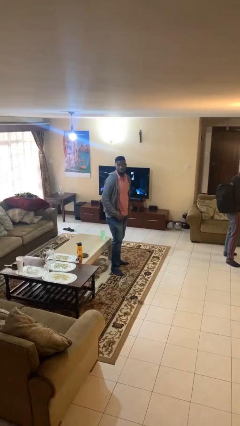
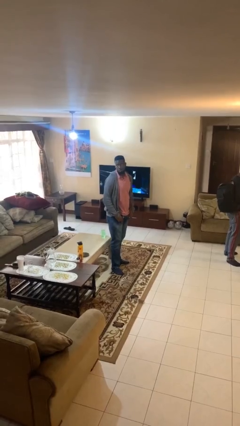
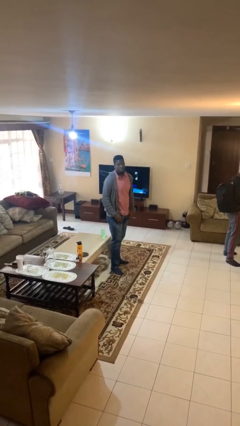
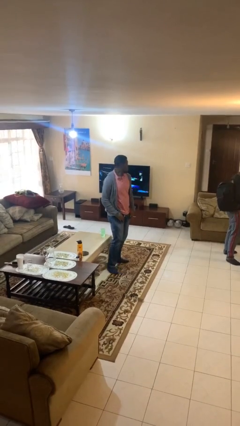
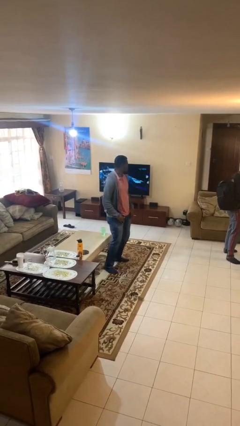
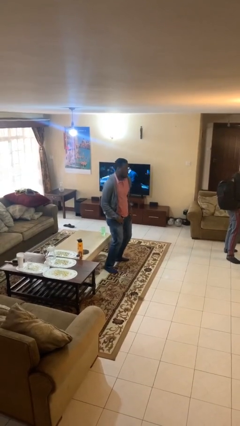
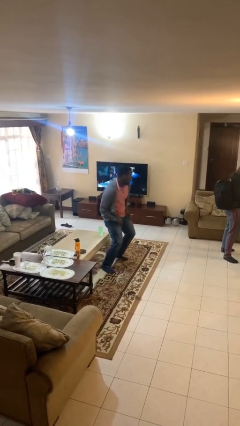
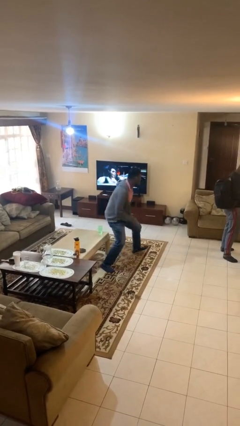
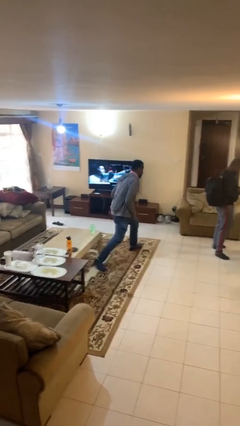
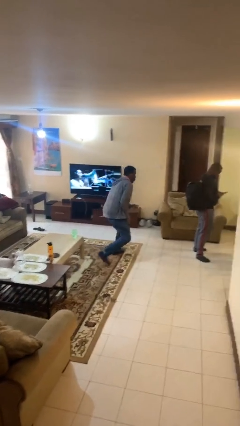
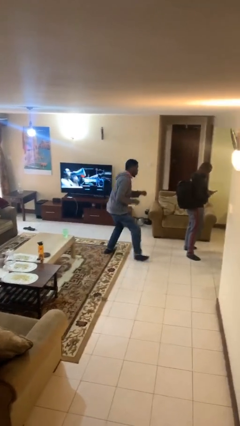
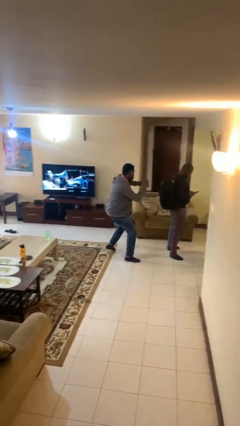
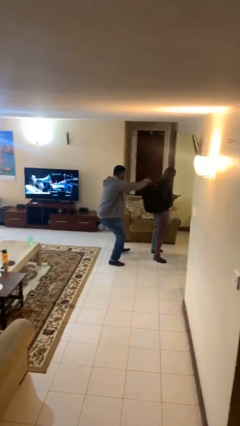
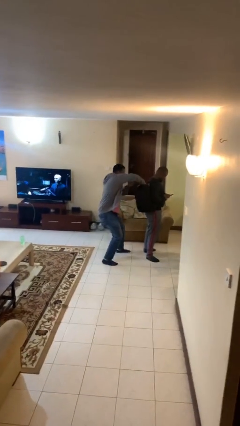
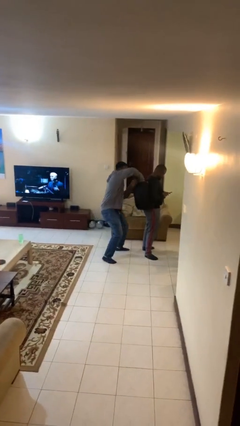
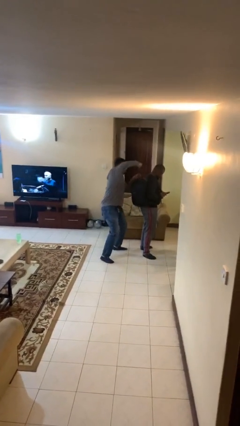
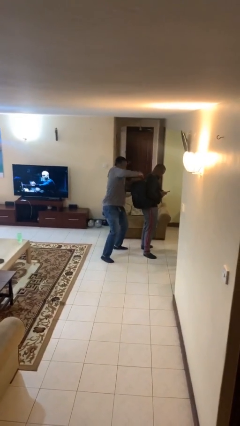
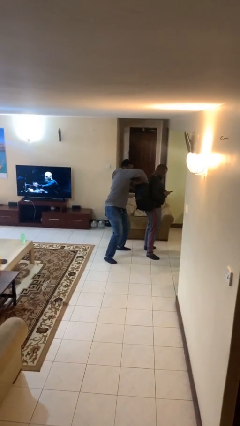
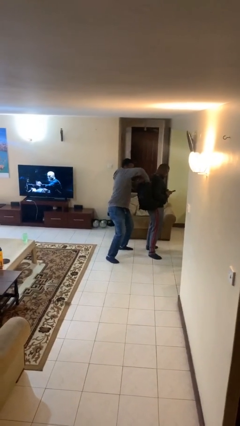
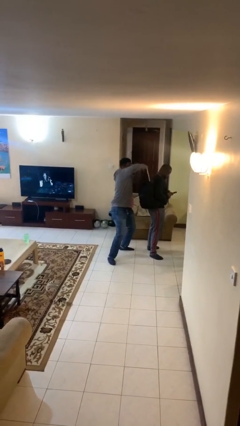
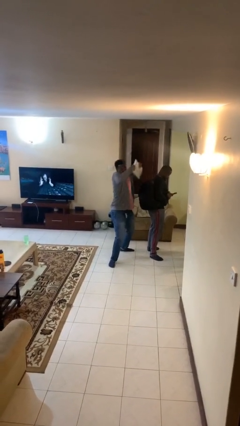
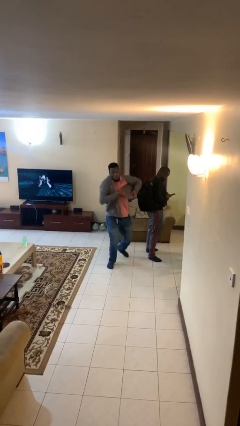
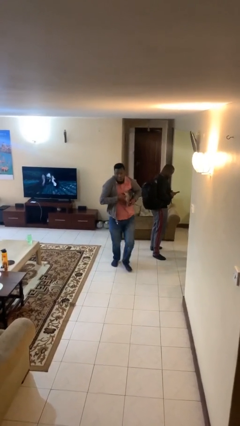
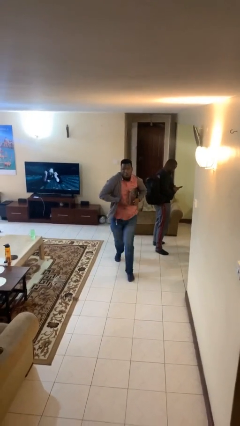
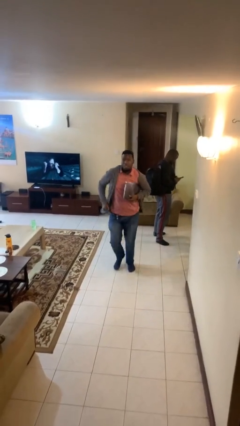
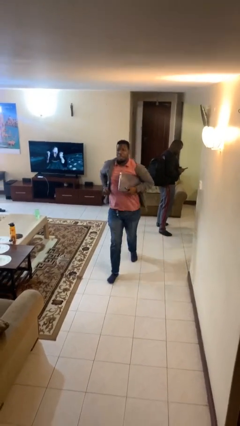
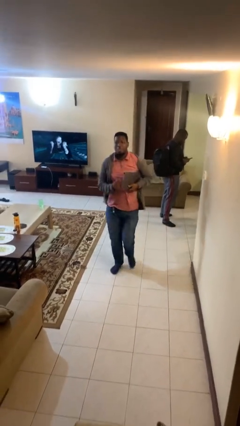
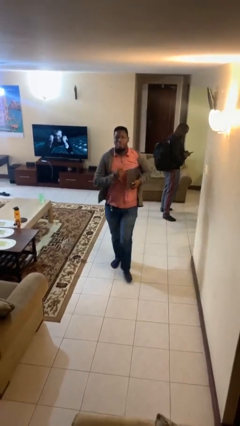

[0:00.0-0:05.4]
person steals object from person

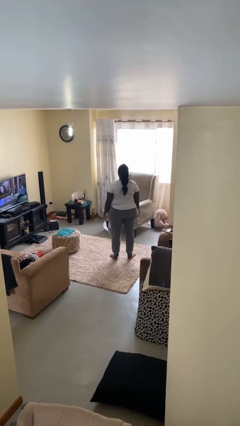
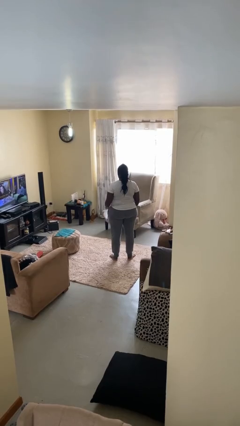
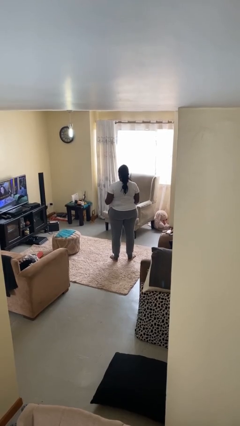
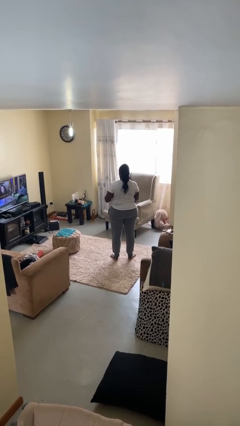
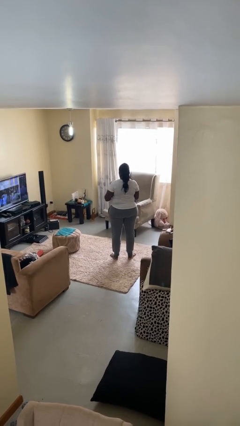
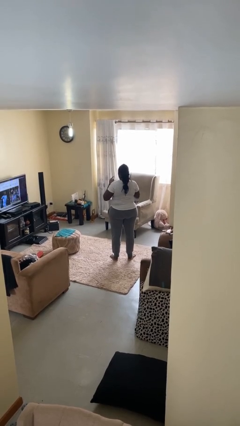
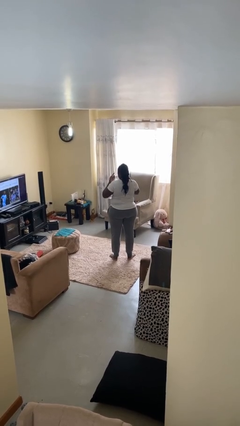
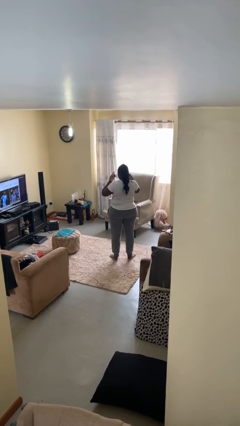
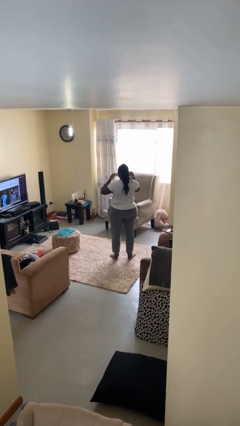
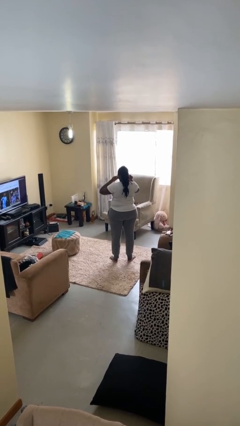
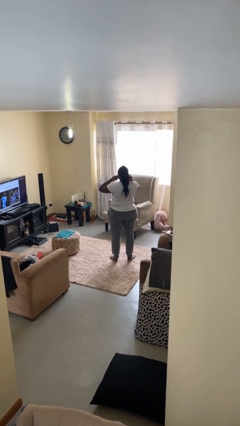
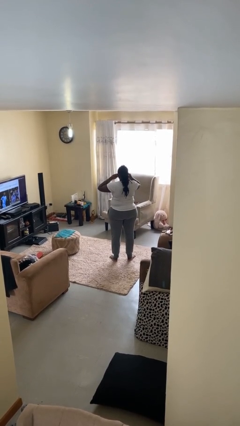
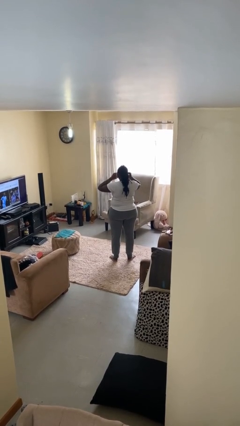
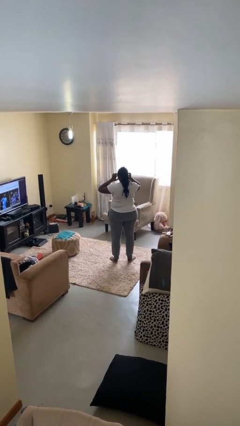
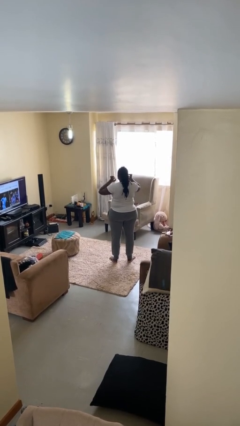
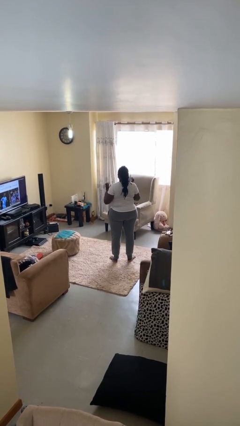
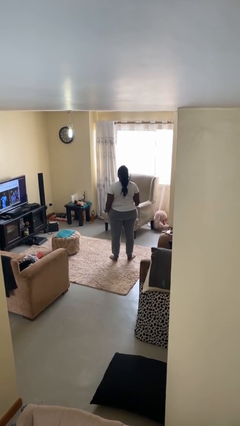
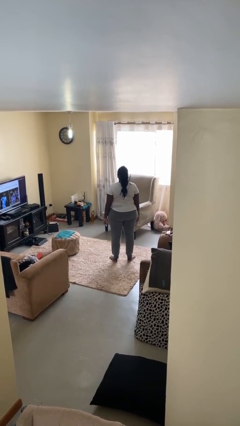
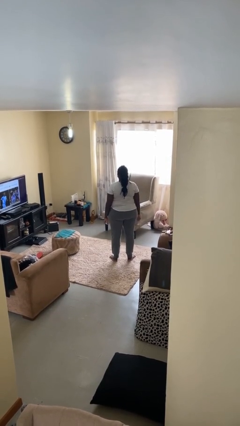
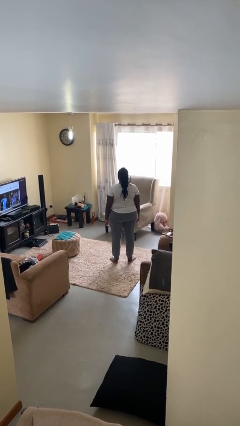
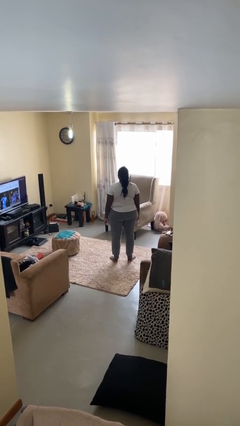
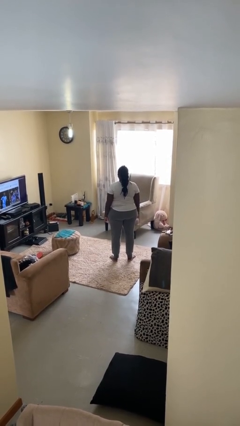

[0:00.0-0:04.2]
person puts on facemask

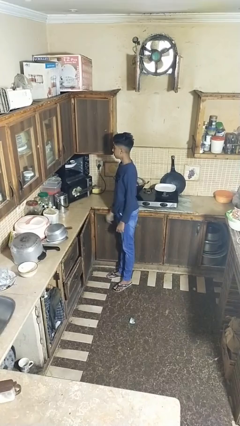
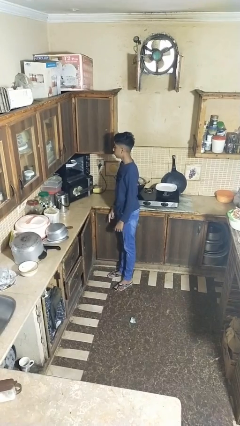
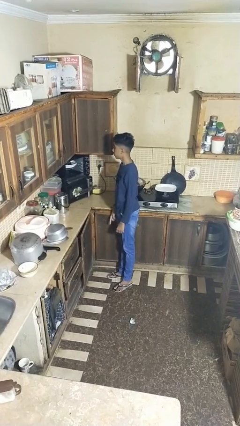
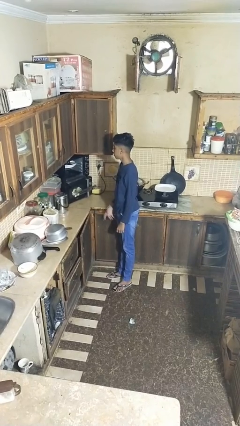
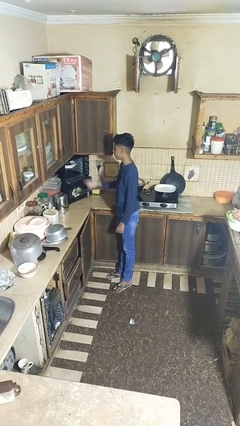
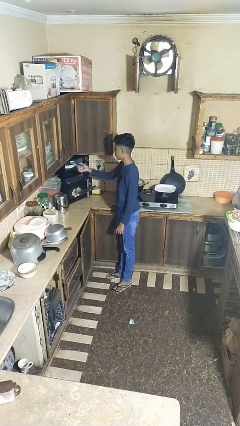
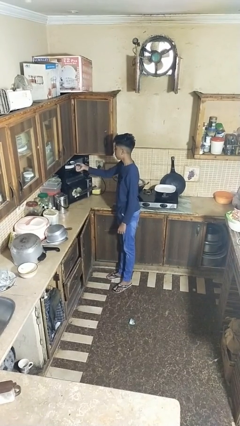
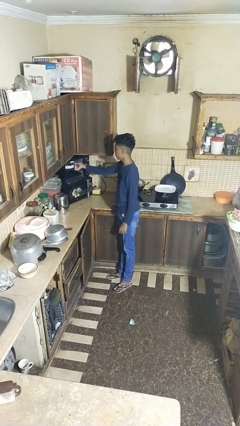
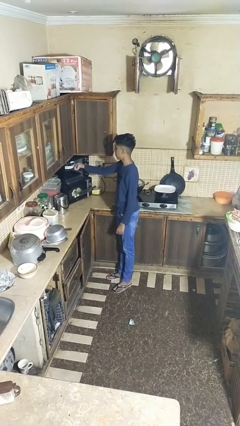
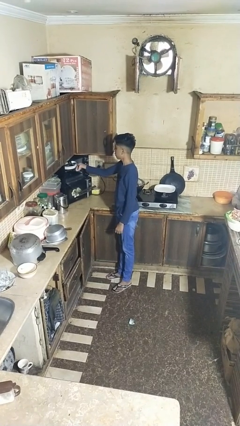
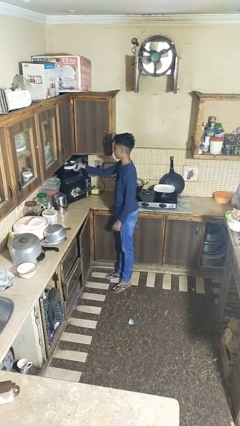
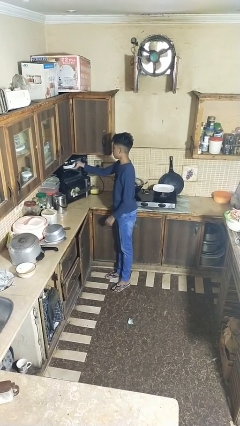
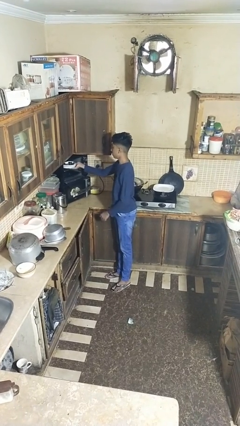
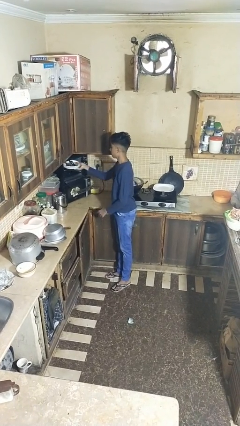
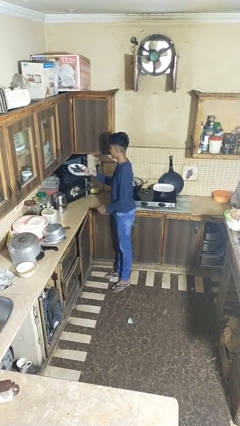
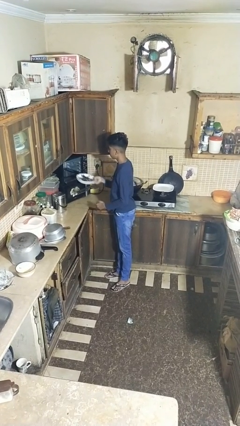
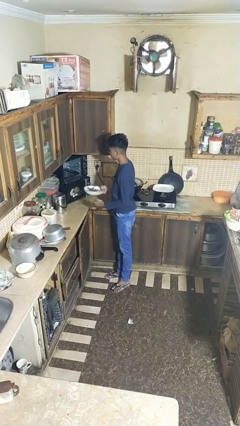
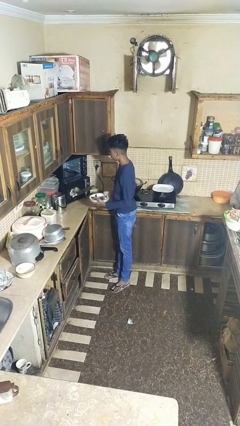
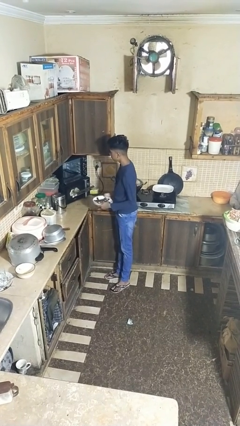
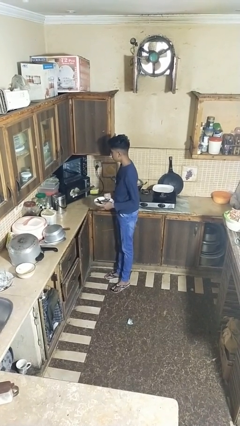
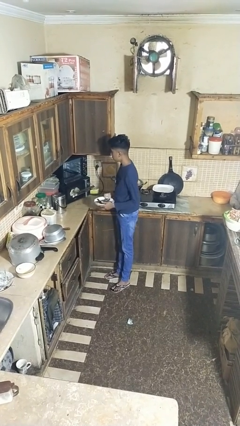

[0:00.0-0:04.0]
person unloads dishwasher

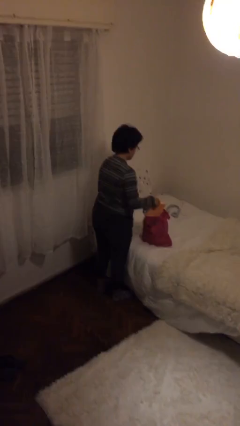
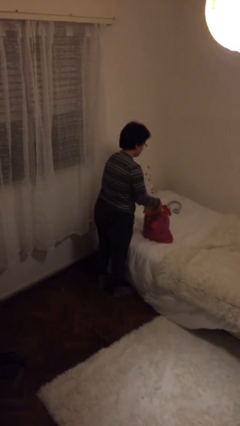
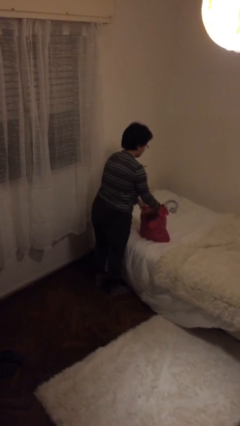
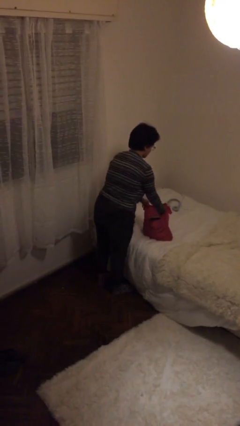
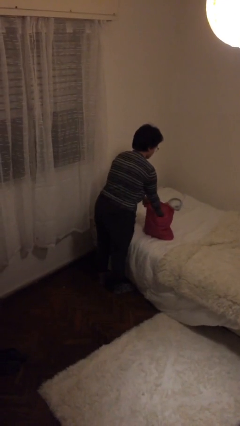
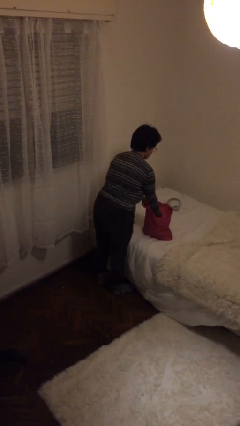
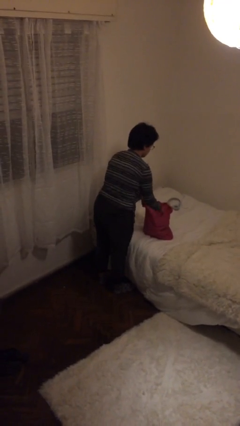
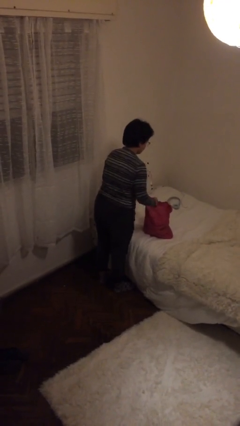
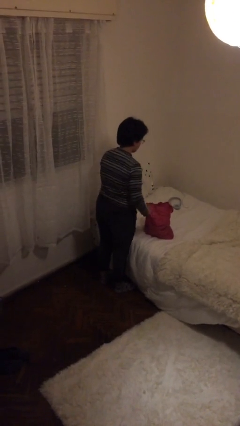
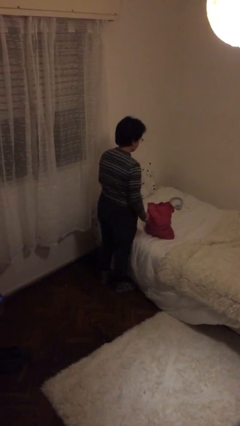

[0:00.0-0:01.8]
person puts object into bag

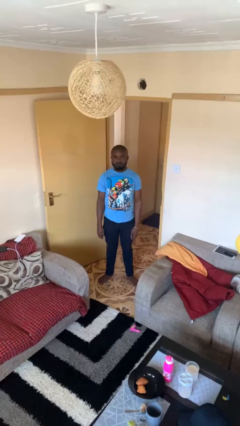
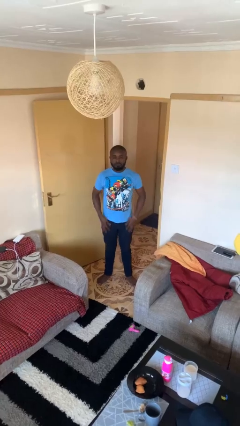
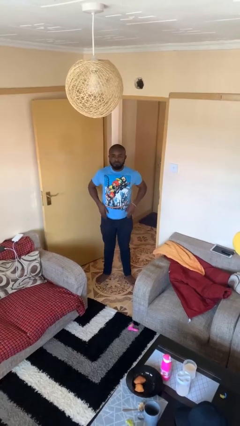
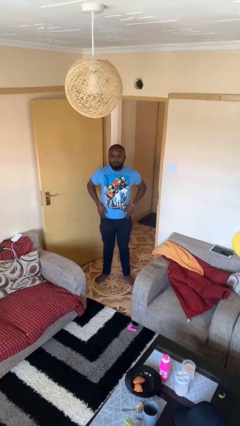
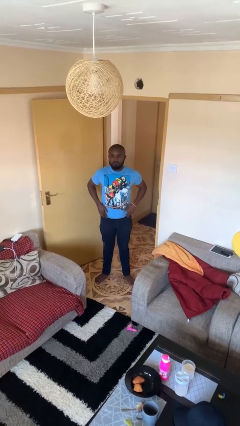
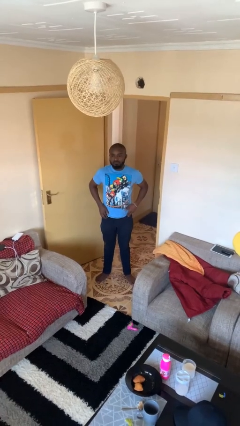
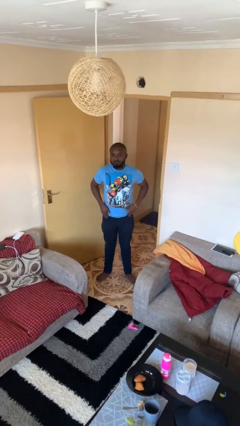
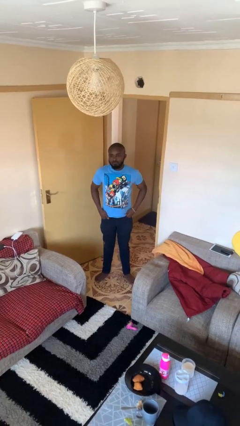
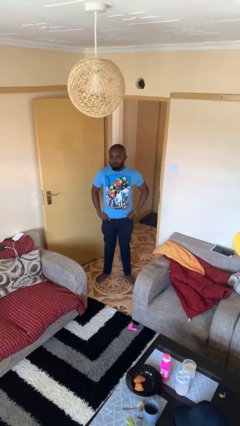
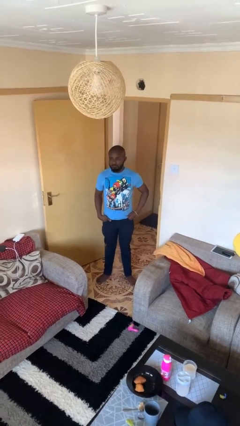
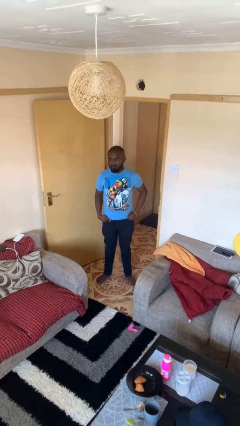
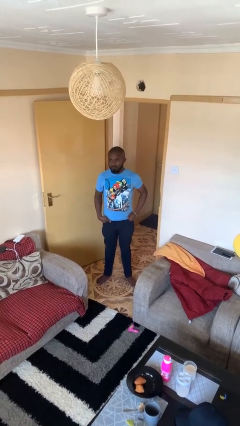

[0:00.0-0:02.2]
person puts hands in back pockets
